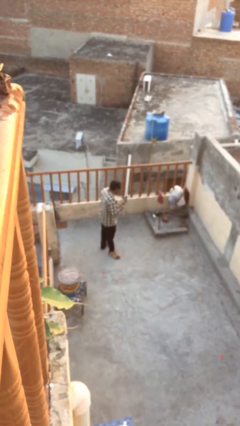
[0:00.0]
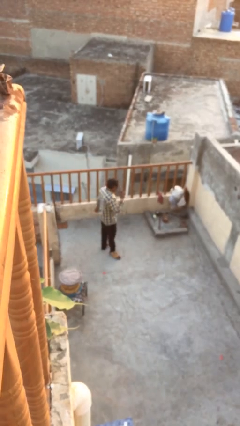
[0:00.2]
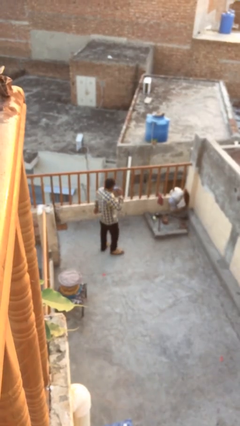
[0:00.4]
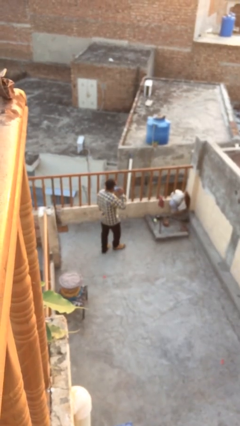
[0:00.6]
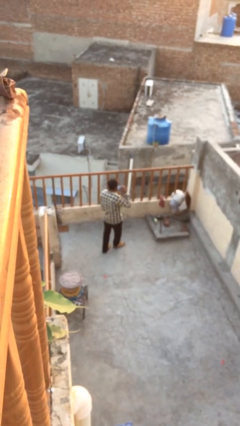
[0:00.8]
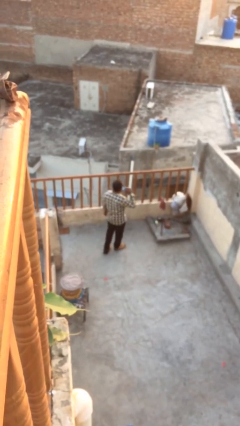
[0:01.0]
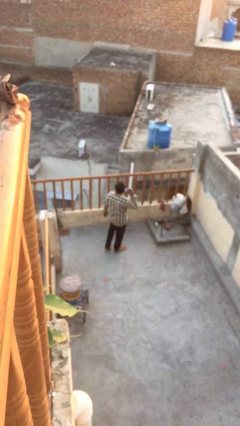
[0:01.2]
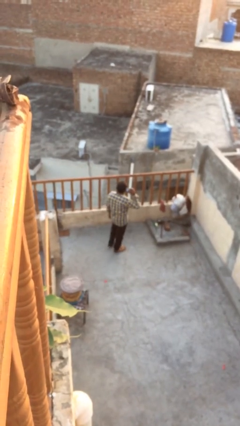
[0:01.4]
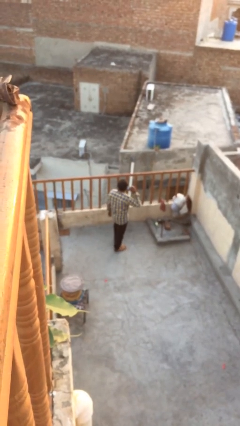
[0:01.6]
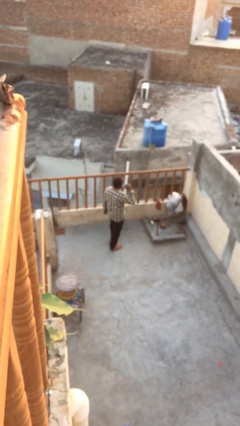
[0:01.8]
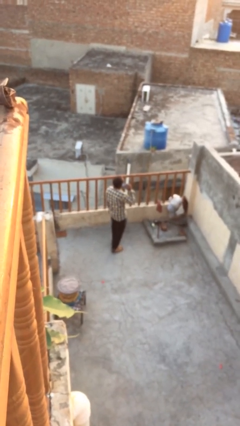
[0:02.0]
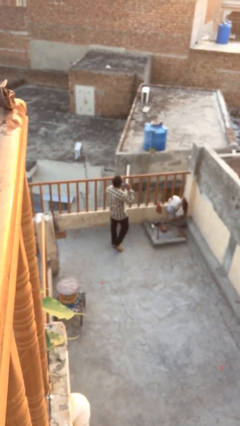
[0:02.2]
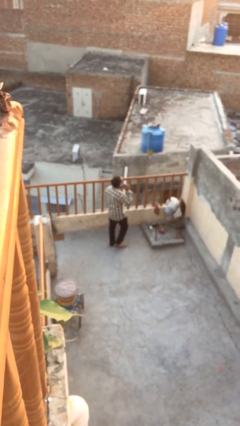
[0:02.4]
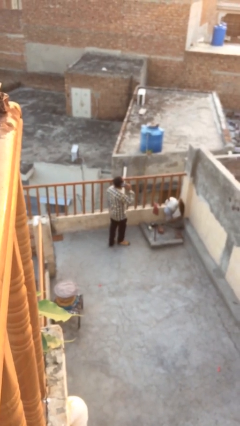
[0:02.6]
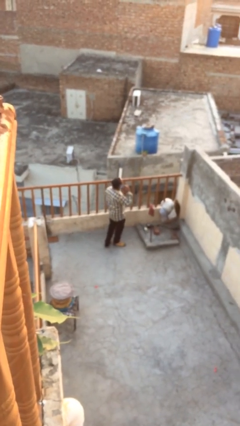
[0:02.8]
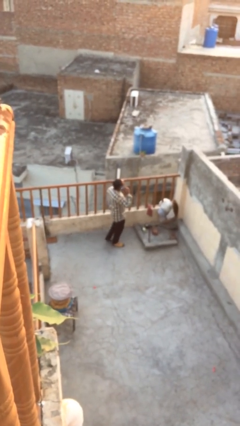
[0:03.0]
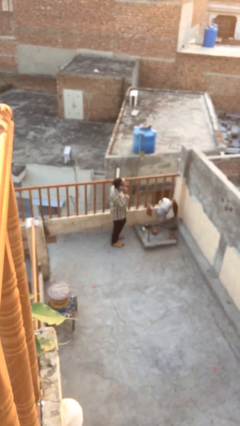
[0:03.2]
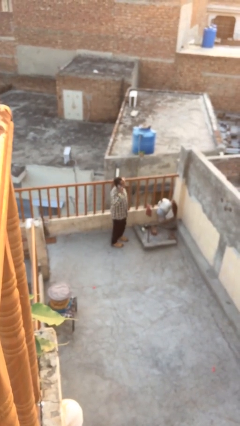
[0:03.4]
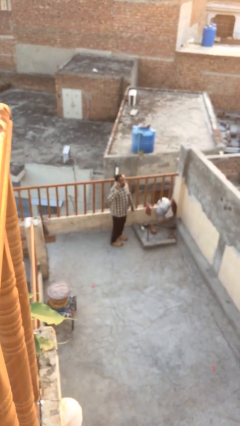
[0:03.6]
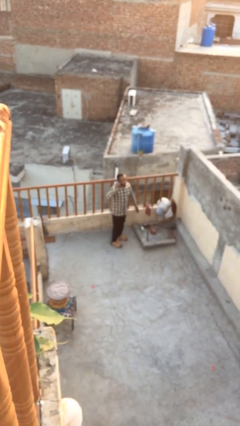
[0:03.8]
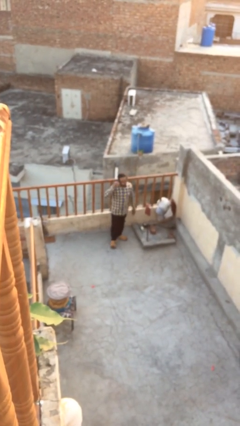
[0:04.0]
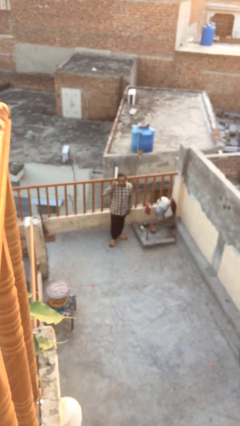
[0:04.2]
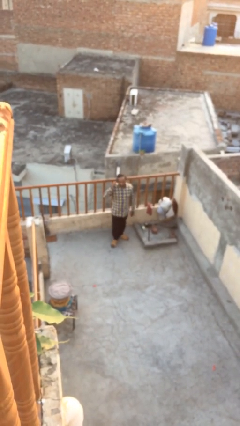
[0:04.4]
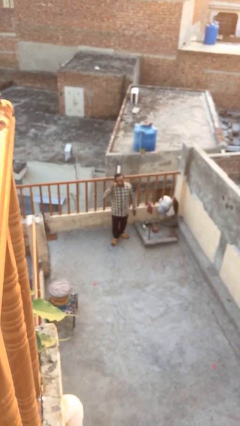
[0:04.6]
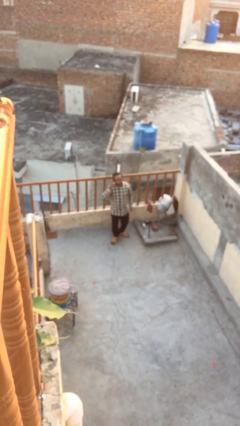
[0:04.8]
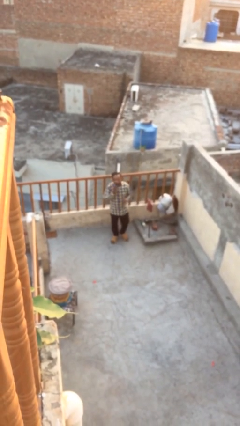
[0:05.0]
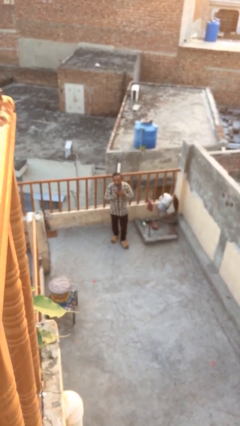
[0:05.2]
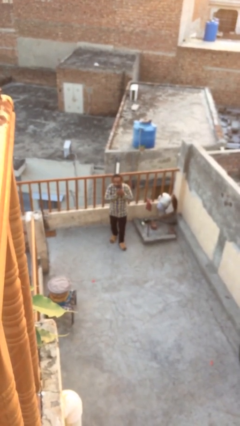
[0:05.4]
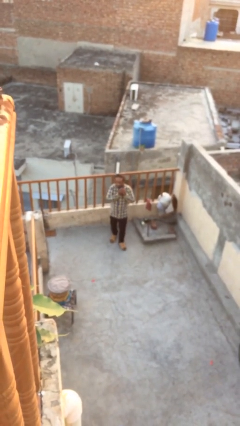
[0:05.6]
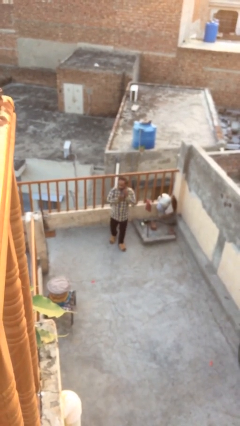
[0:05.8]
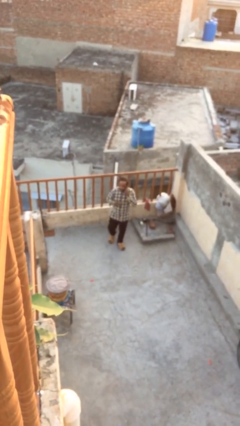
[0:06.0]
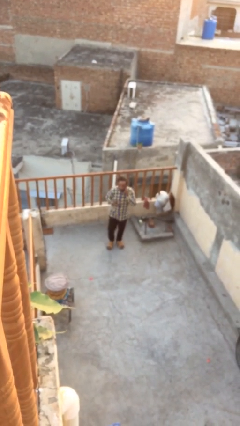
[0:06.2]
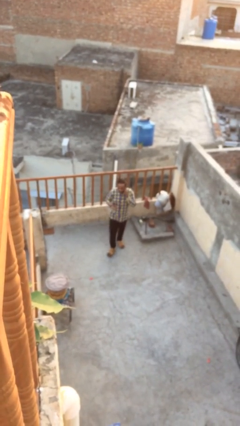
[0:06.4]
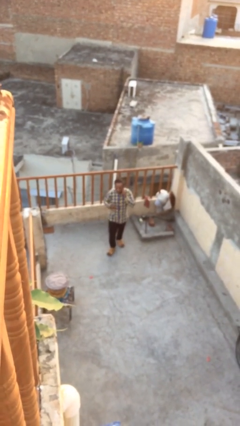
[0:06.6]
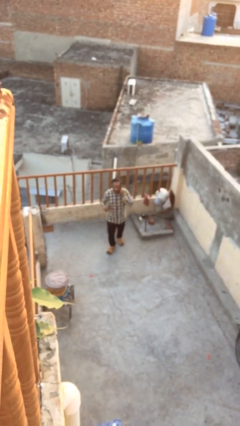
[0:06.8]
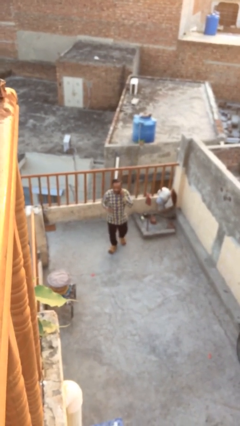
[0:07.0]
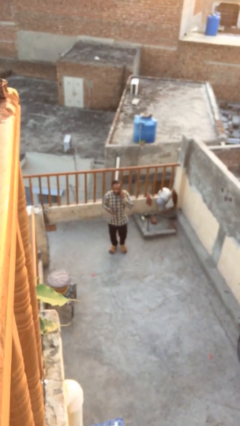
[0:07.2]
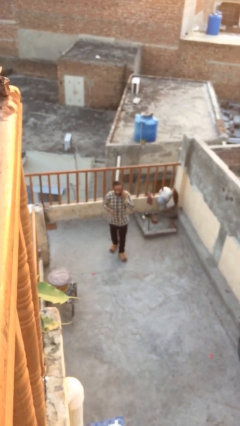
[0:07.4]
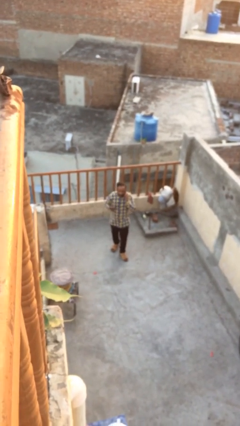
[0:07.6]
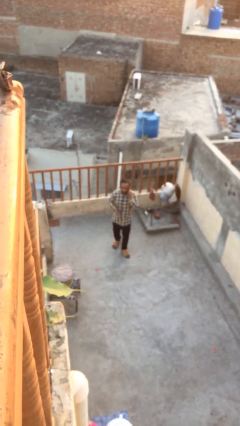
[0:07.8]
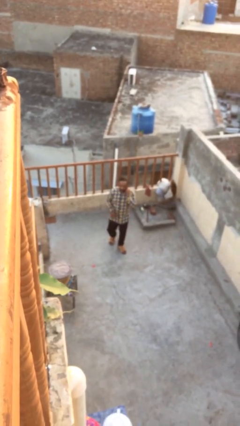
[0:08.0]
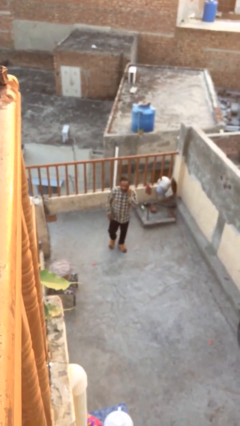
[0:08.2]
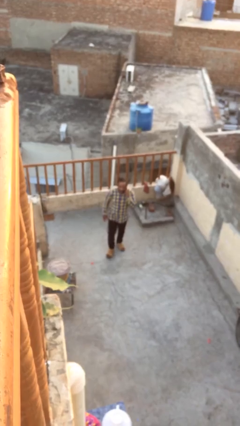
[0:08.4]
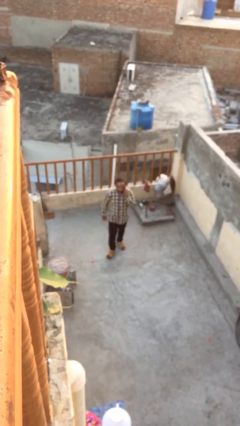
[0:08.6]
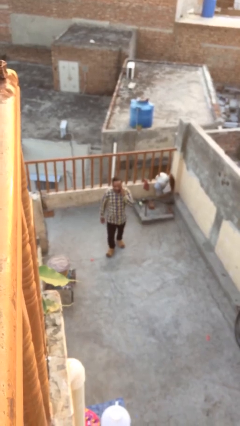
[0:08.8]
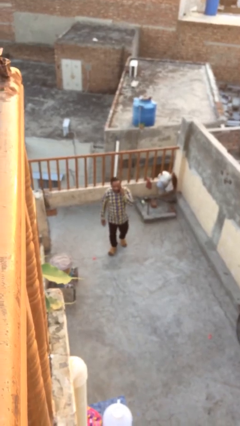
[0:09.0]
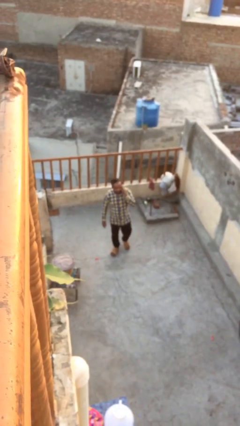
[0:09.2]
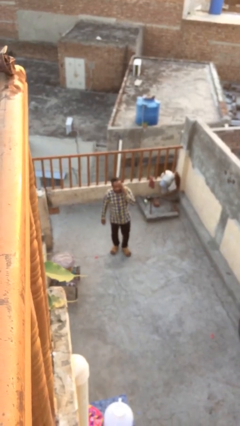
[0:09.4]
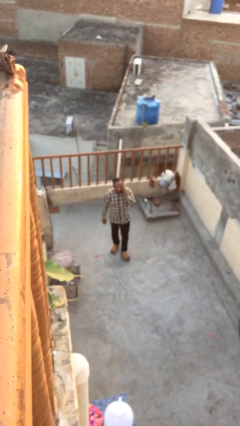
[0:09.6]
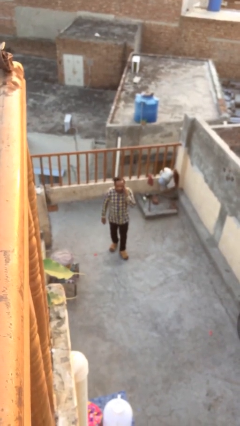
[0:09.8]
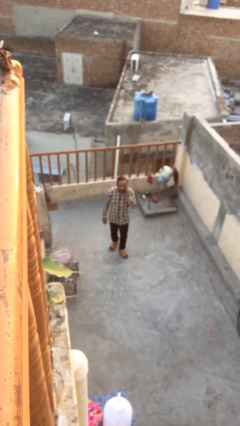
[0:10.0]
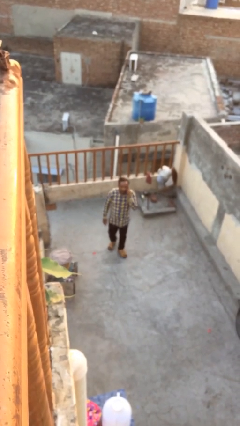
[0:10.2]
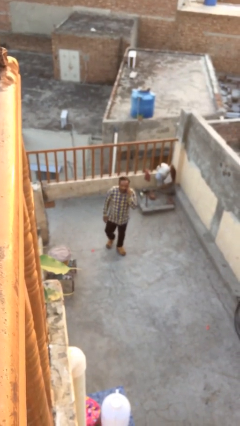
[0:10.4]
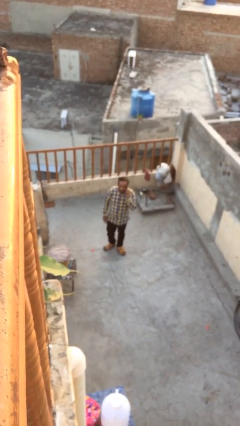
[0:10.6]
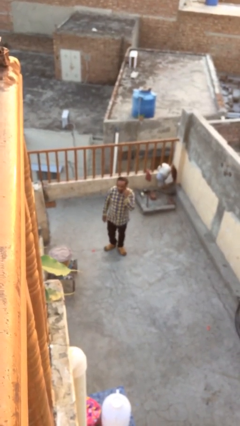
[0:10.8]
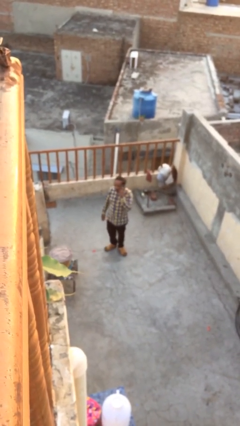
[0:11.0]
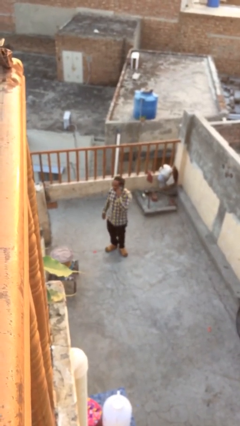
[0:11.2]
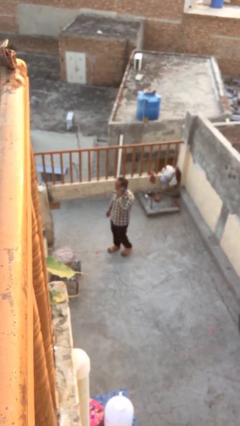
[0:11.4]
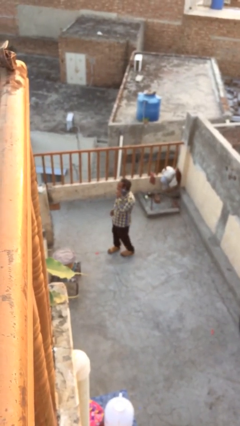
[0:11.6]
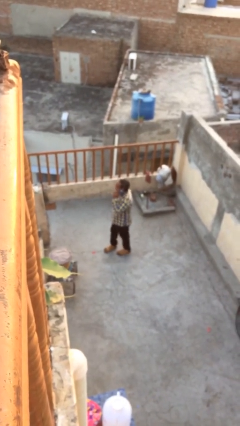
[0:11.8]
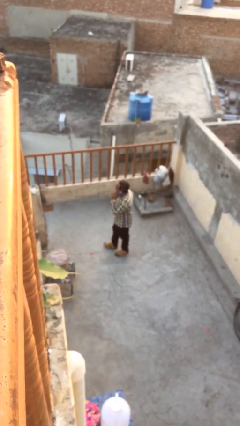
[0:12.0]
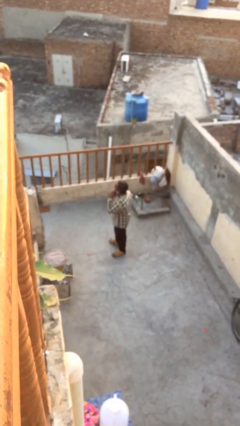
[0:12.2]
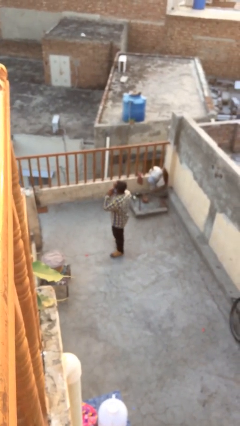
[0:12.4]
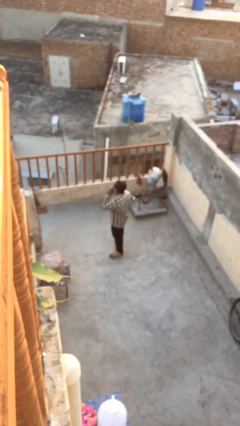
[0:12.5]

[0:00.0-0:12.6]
person talks on phone
